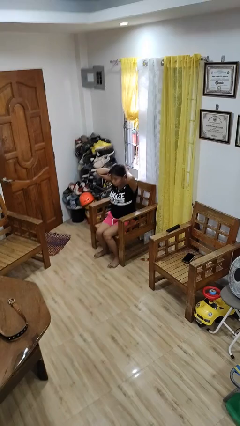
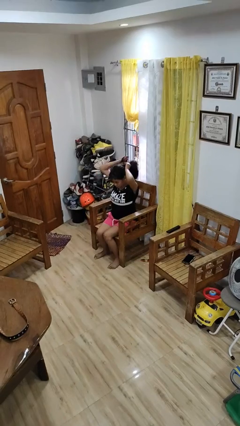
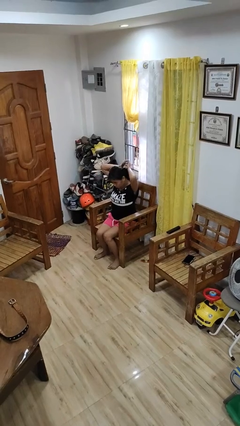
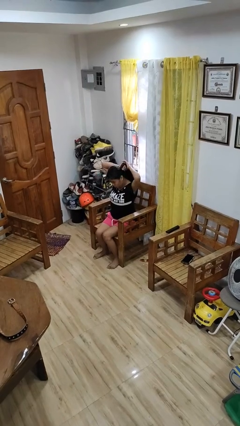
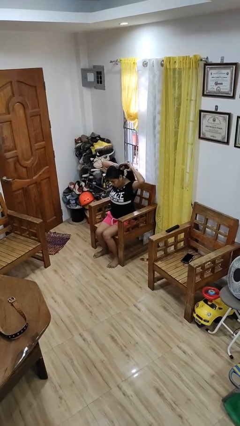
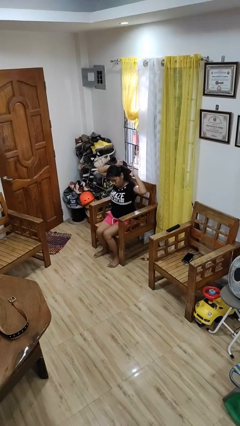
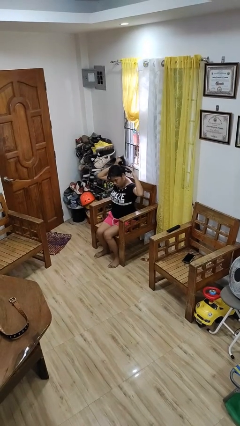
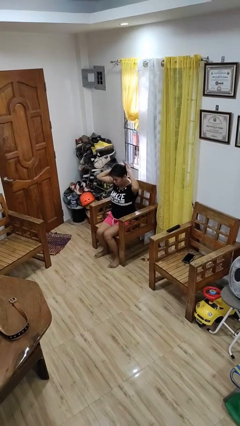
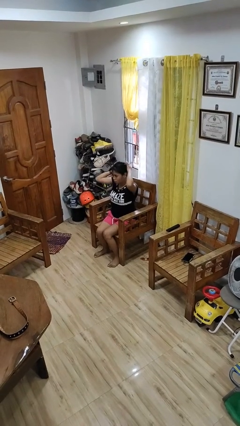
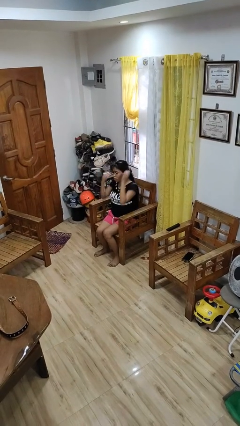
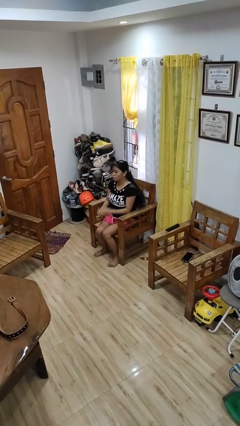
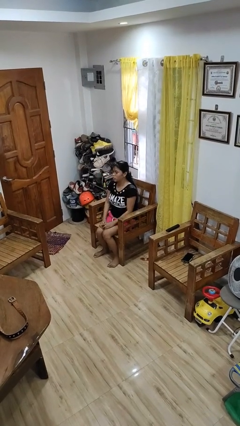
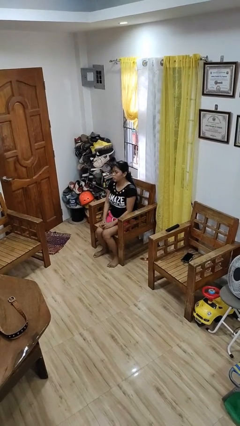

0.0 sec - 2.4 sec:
person puts hair in ponytail

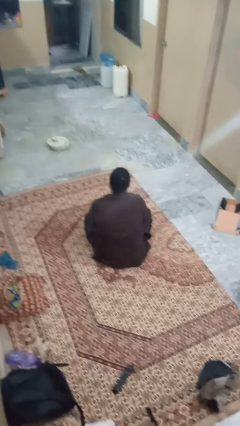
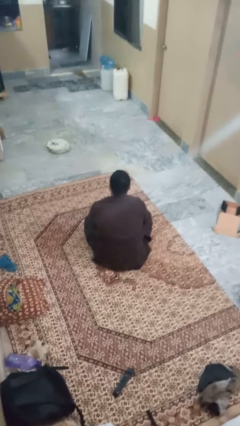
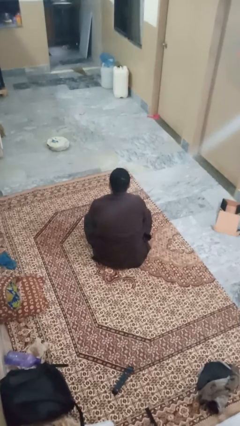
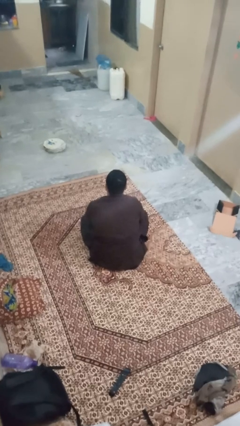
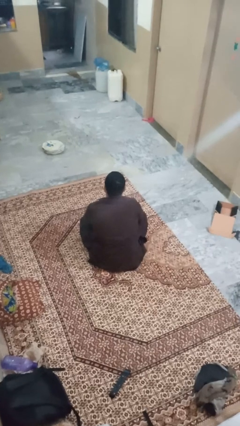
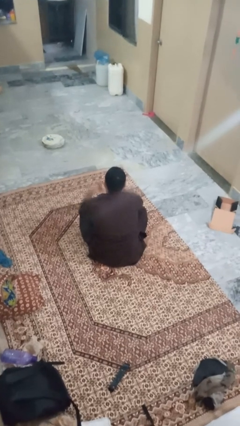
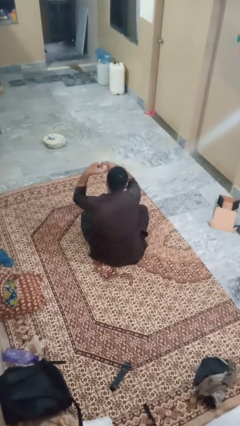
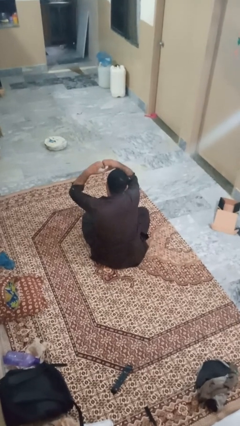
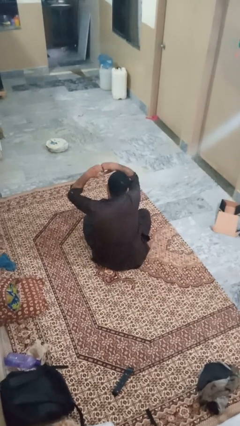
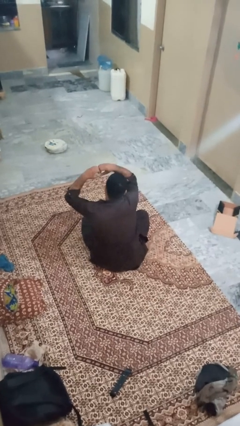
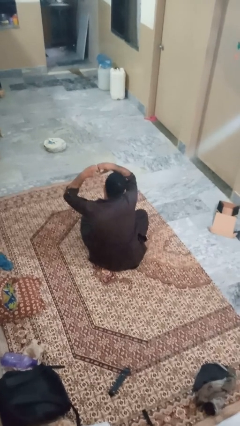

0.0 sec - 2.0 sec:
person gestures heart

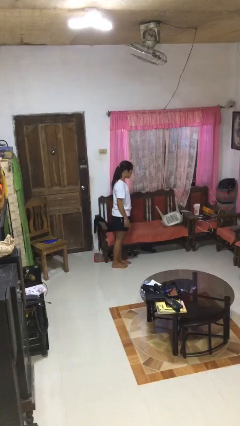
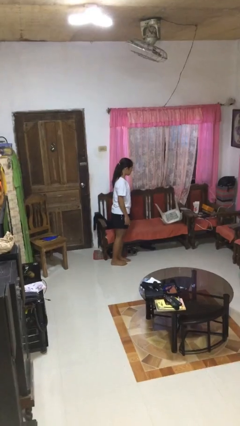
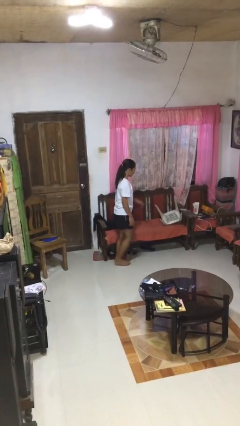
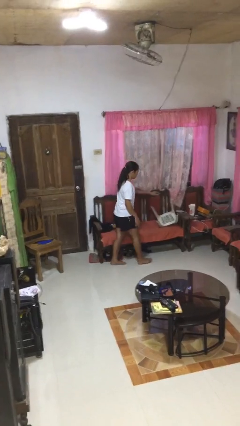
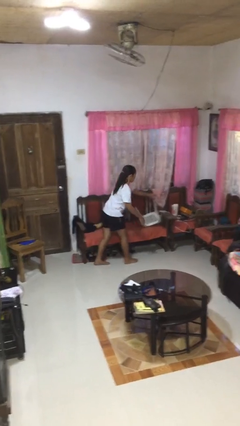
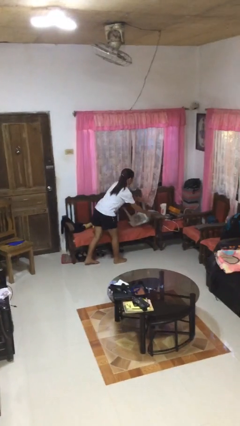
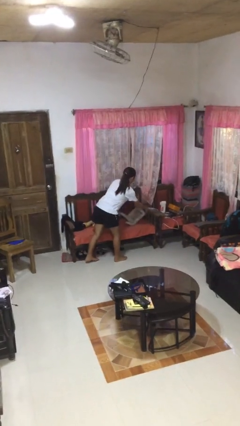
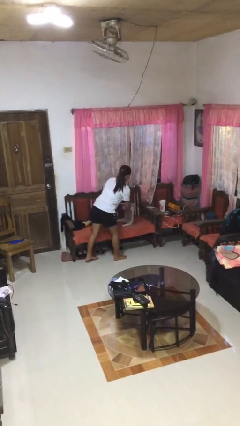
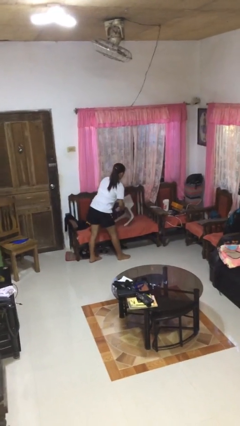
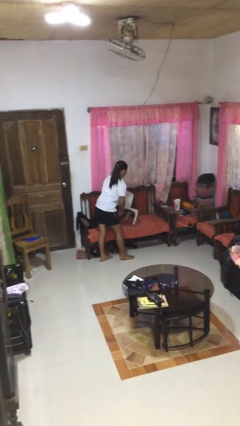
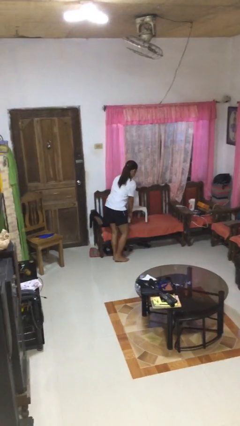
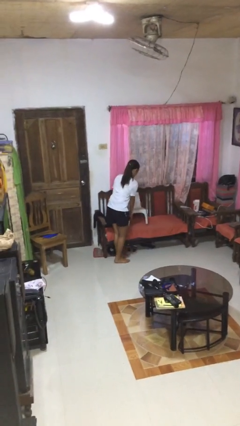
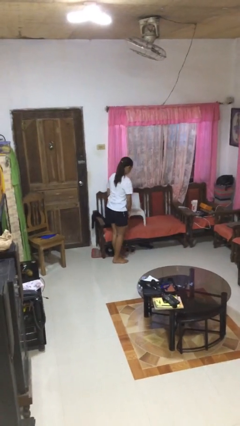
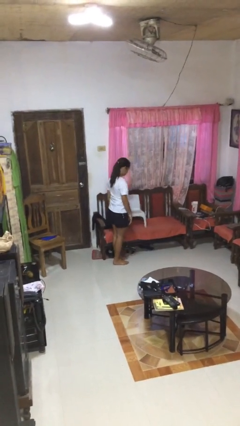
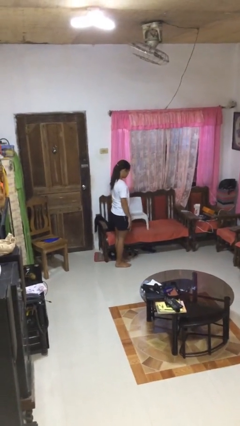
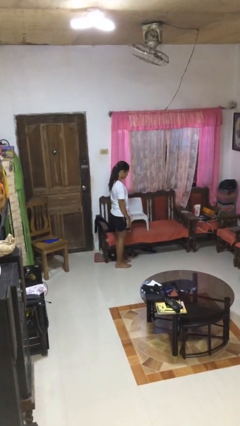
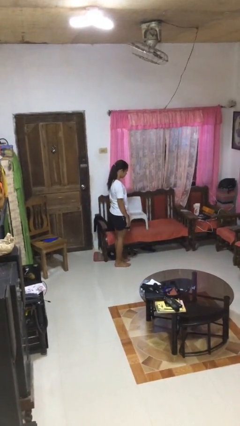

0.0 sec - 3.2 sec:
person sets upright furniture

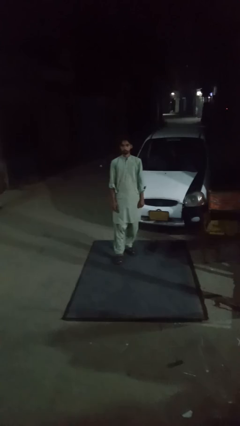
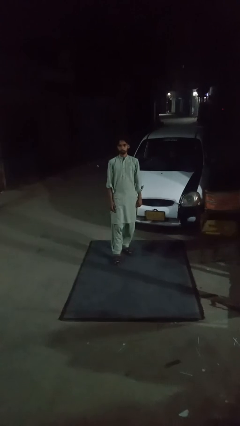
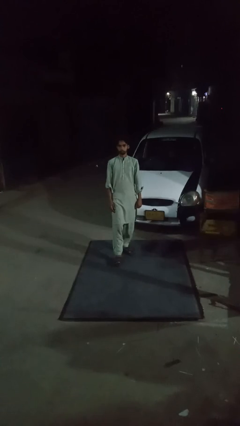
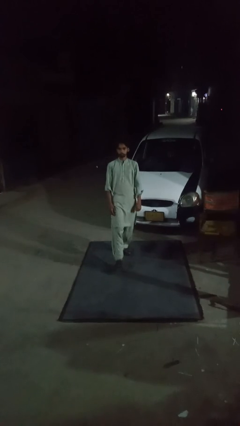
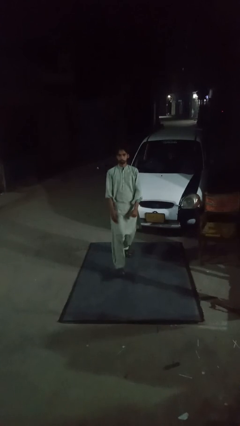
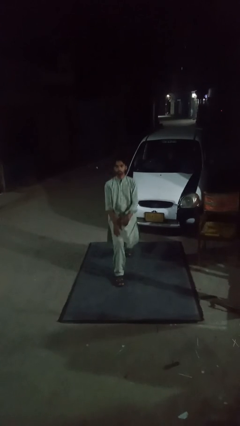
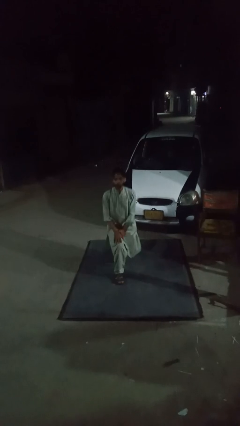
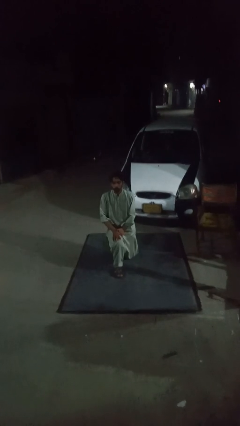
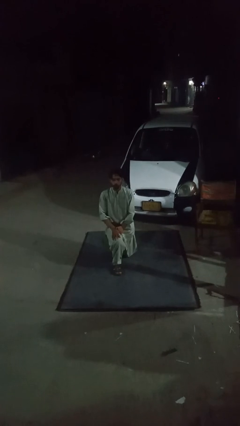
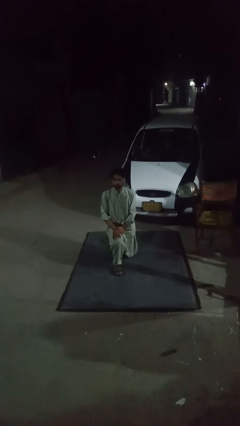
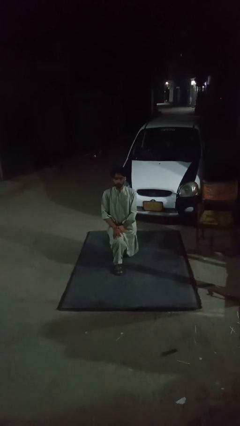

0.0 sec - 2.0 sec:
person exercises with lunges

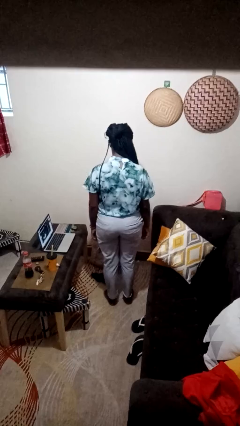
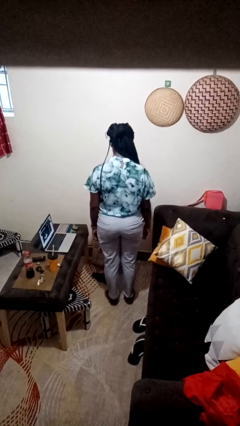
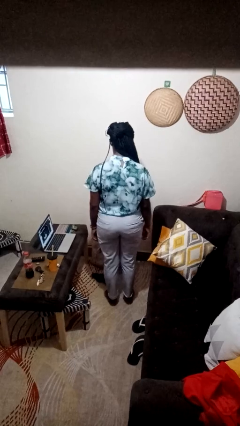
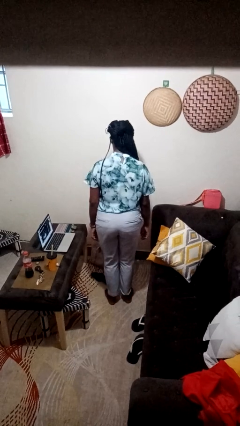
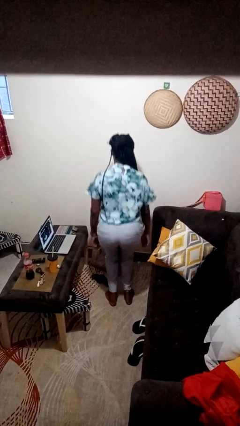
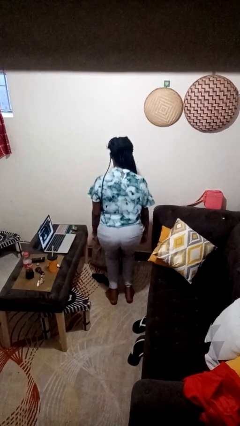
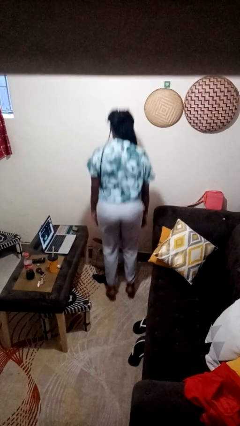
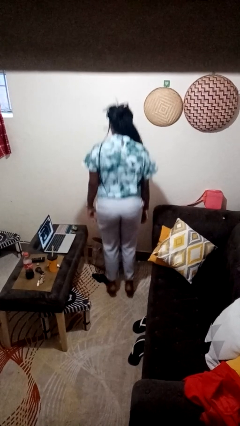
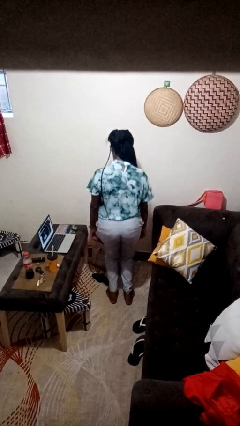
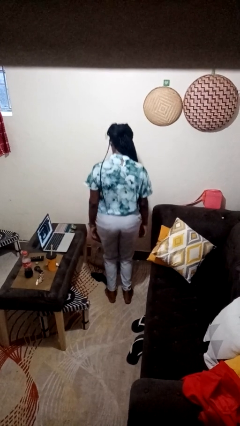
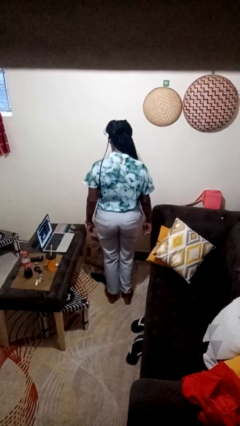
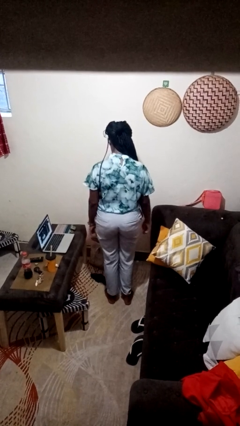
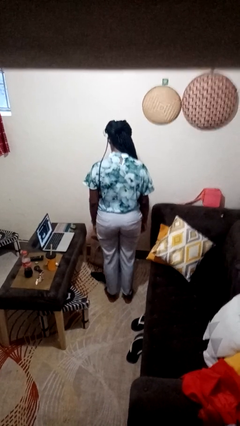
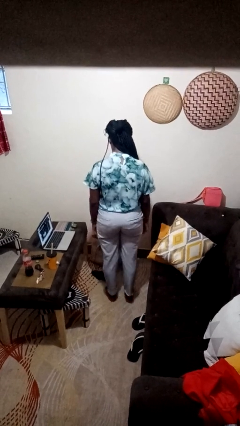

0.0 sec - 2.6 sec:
person jumps

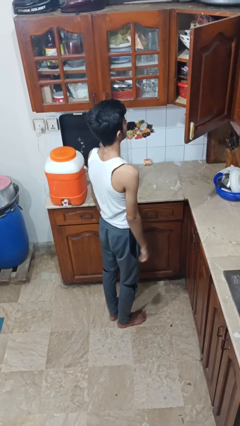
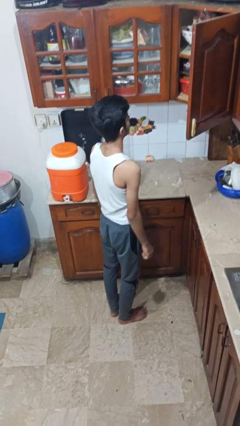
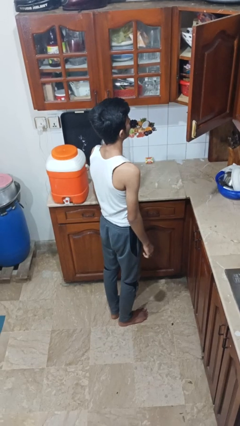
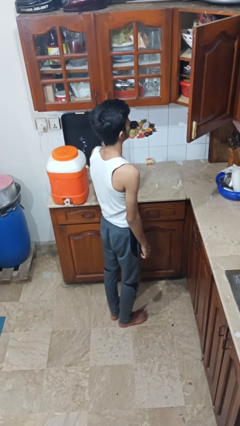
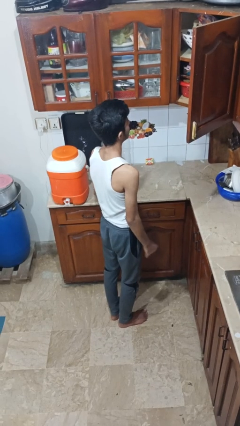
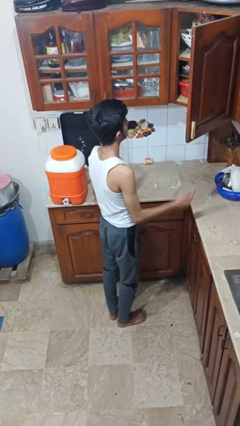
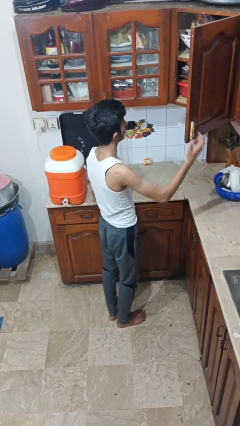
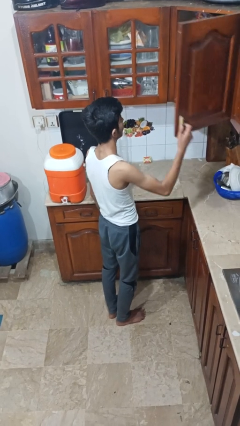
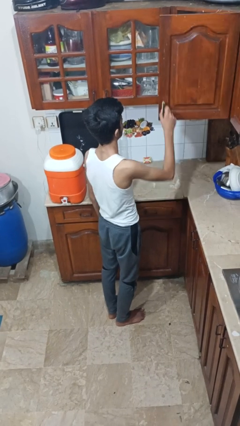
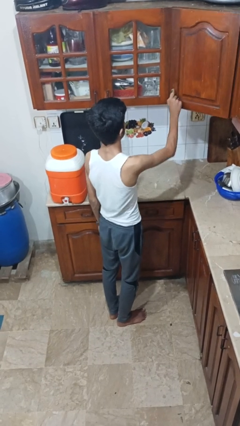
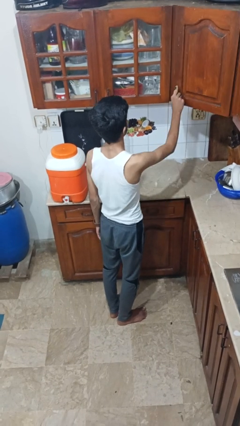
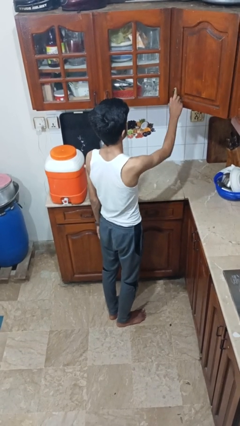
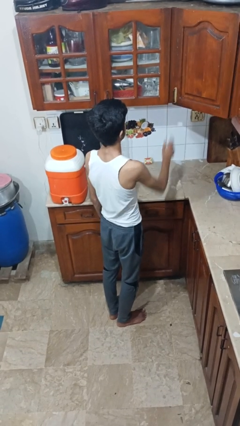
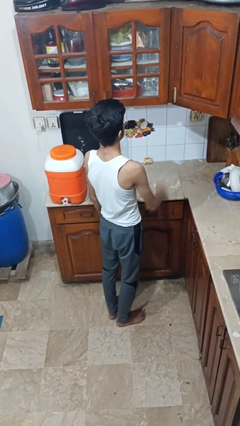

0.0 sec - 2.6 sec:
person closes cabinet

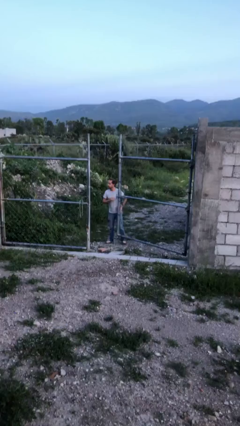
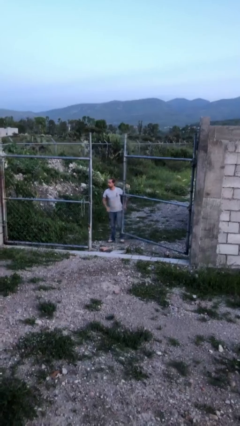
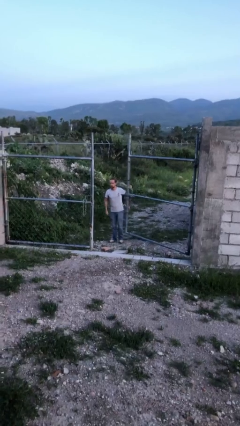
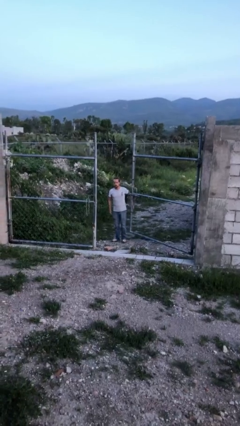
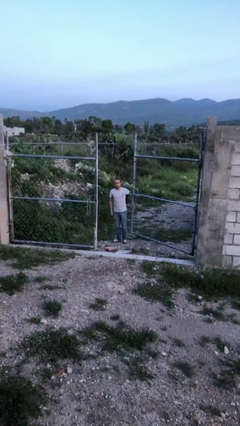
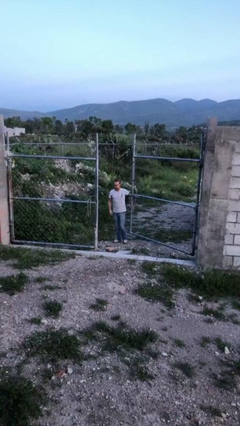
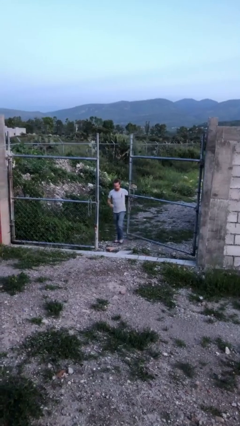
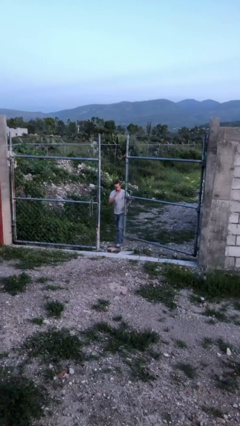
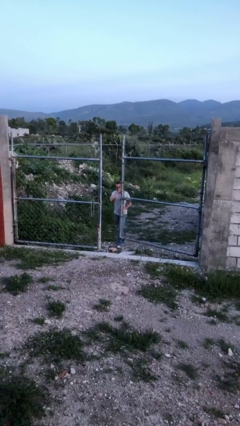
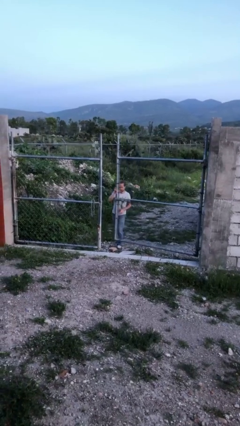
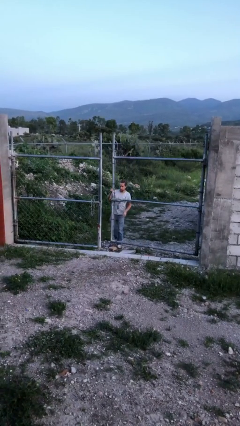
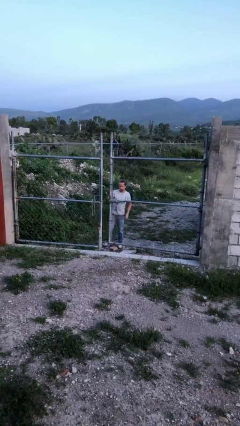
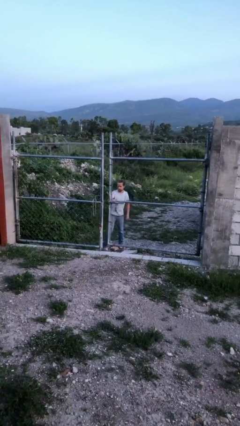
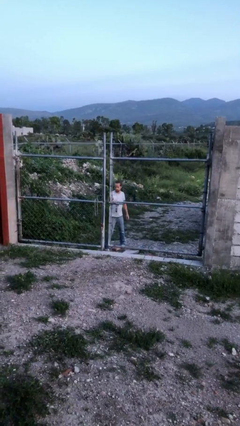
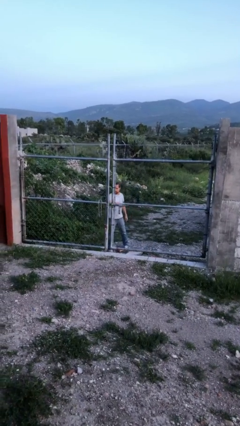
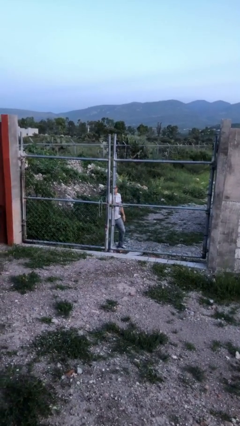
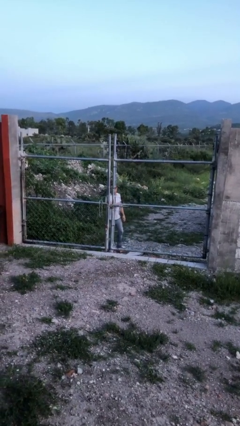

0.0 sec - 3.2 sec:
person closes gate
